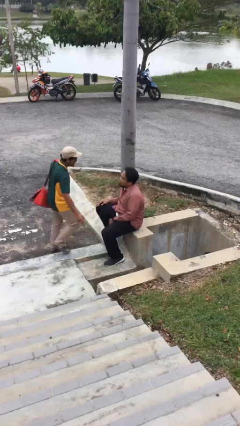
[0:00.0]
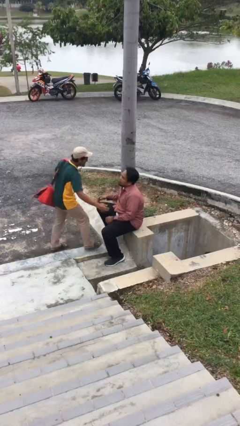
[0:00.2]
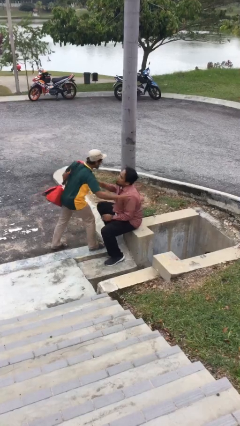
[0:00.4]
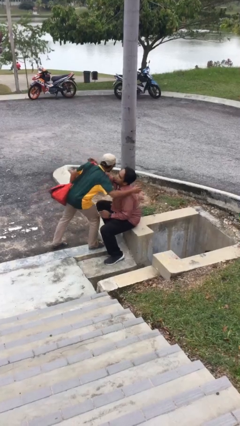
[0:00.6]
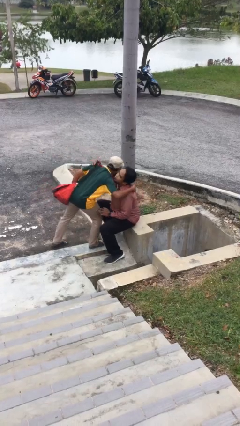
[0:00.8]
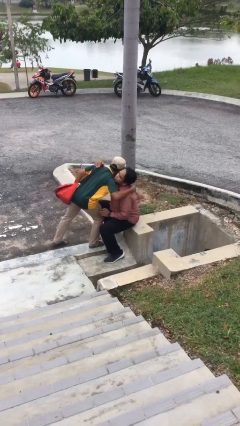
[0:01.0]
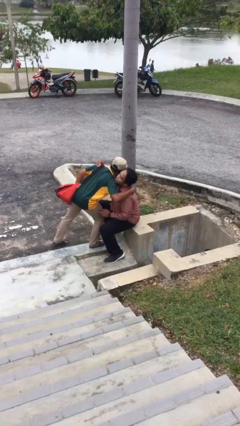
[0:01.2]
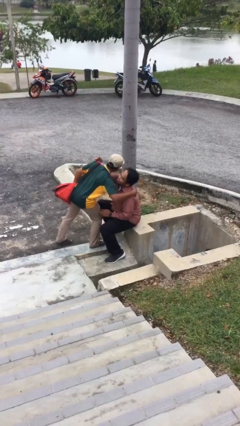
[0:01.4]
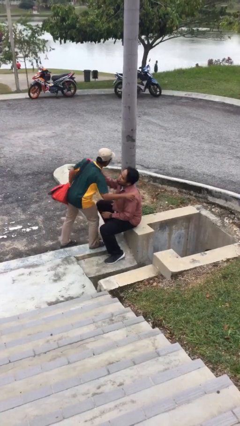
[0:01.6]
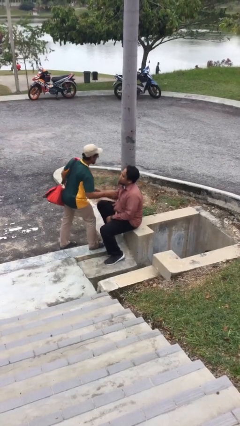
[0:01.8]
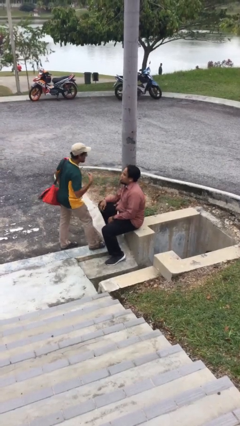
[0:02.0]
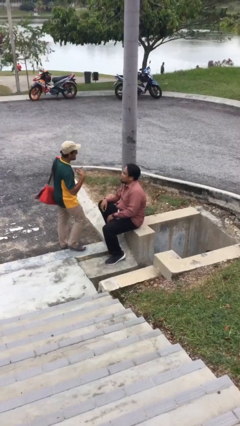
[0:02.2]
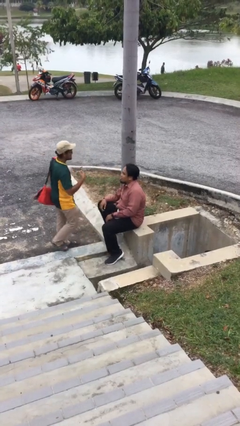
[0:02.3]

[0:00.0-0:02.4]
person embraces person

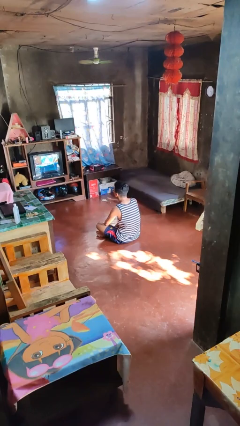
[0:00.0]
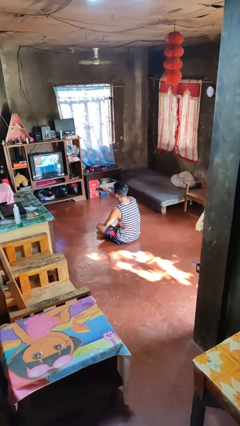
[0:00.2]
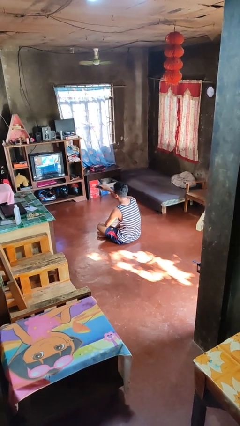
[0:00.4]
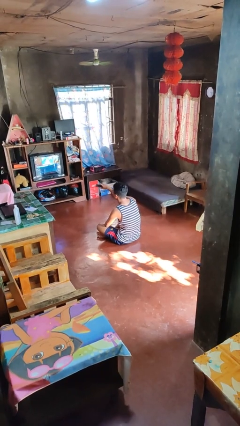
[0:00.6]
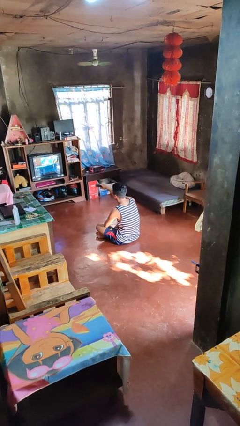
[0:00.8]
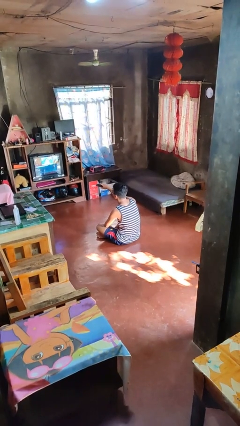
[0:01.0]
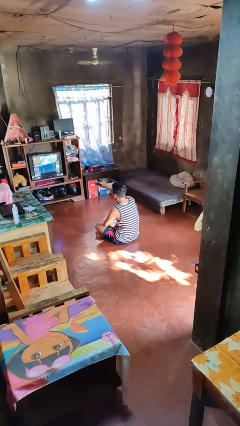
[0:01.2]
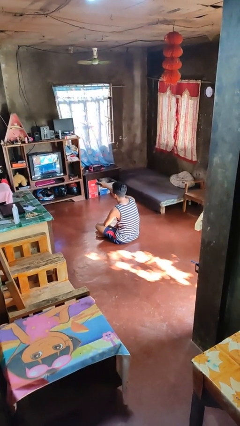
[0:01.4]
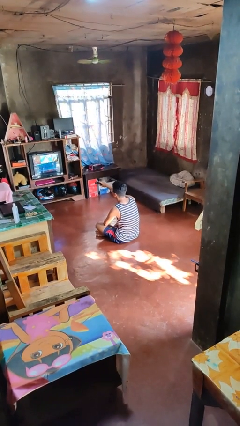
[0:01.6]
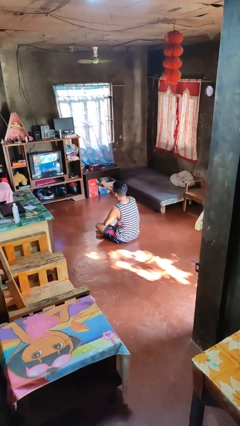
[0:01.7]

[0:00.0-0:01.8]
person uses television remote

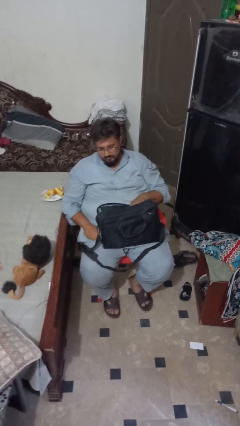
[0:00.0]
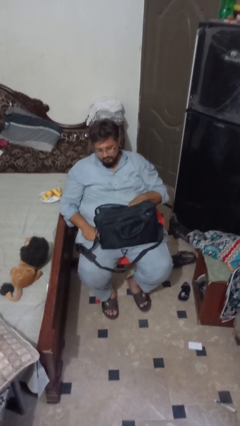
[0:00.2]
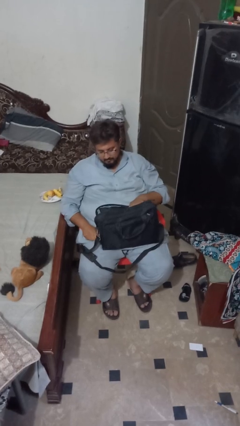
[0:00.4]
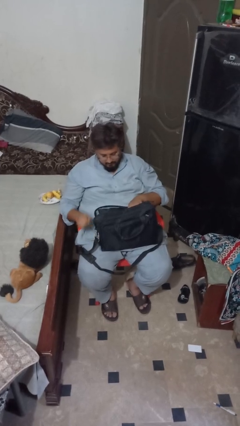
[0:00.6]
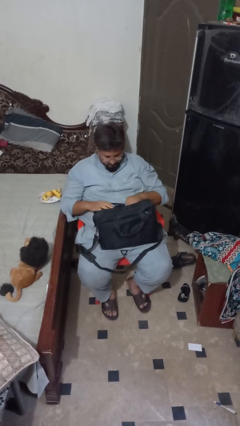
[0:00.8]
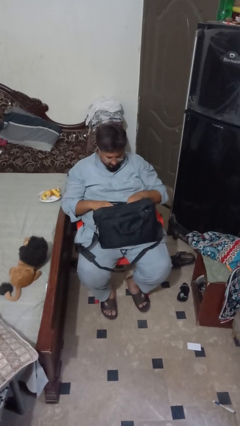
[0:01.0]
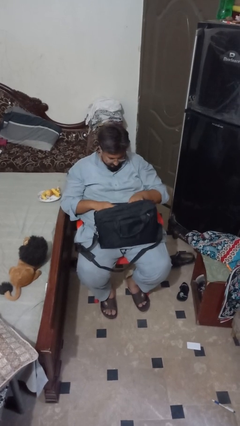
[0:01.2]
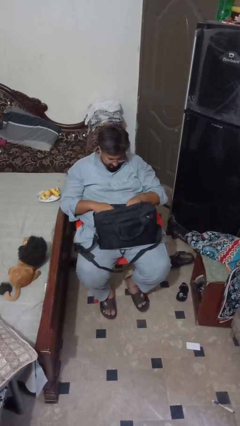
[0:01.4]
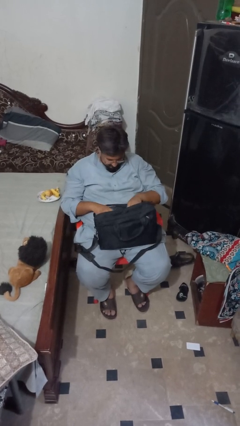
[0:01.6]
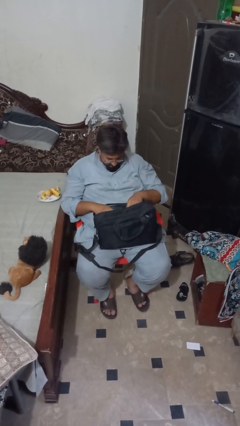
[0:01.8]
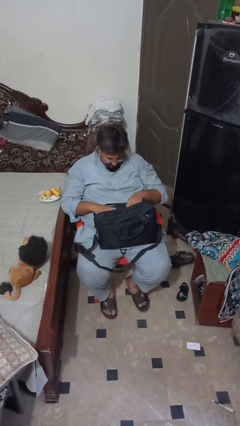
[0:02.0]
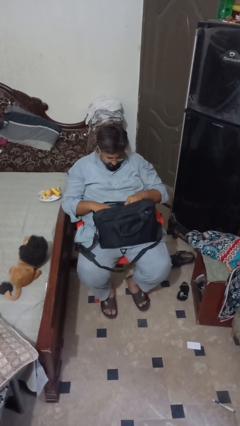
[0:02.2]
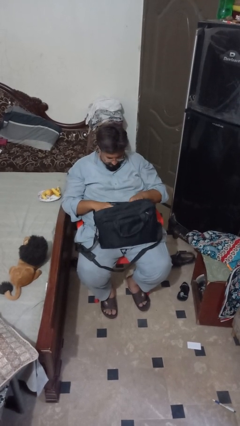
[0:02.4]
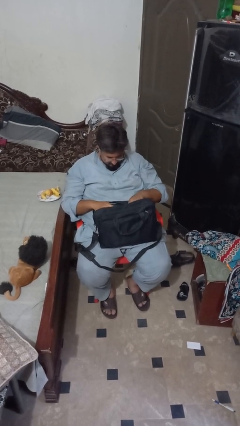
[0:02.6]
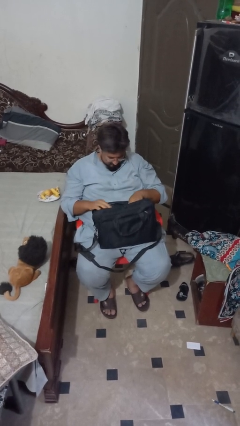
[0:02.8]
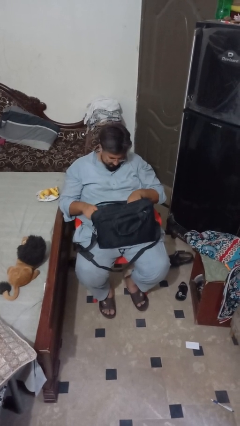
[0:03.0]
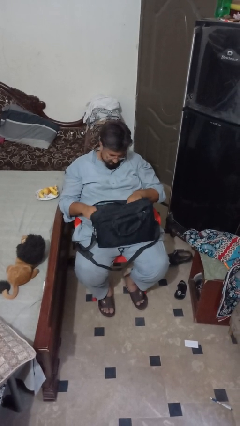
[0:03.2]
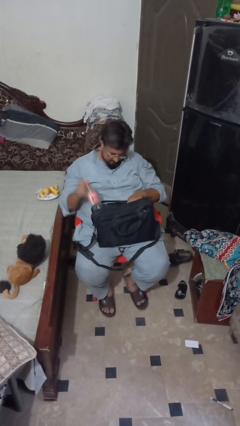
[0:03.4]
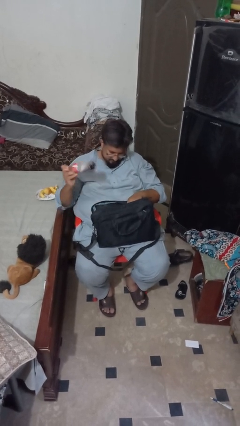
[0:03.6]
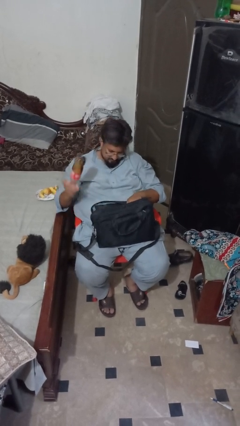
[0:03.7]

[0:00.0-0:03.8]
person takes object from bag

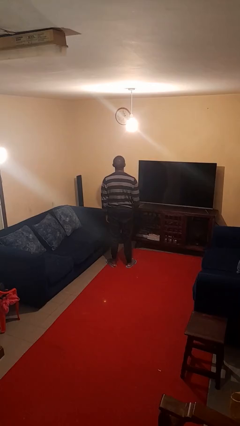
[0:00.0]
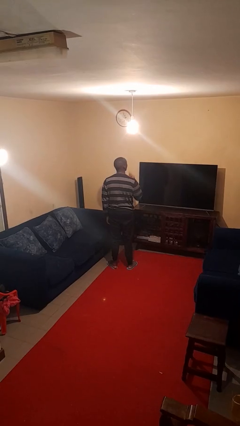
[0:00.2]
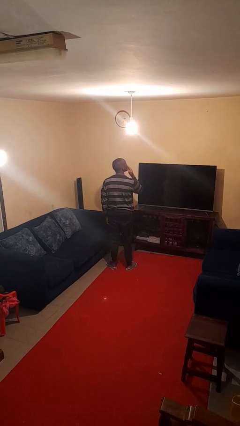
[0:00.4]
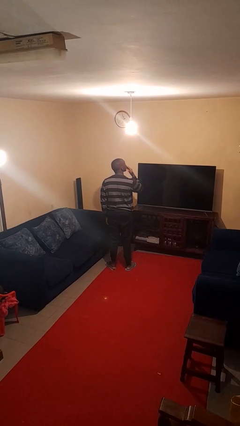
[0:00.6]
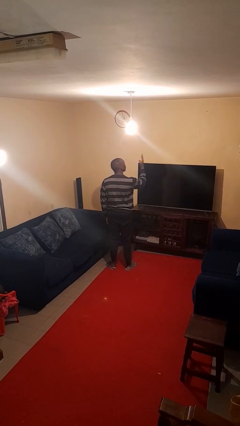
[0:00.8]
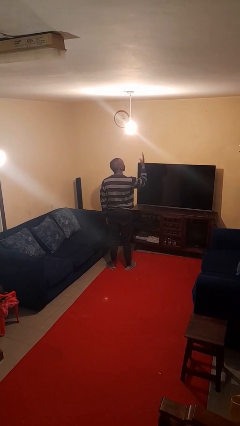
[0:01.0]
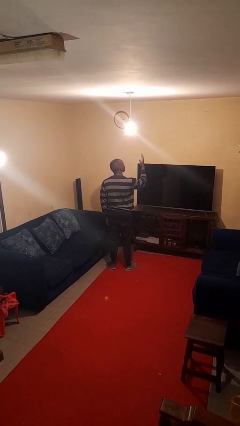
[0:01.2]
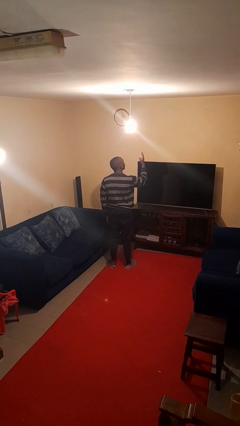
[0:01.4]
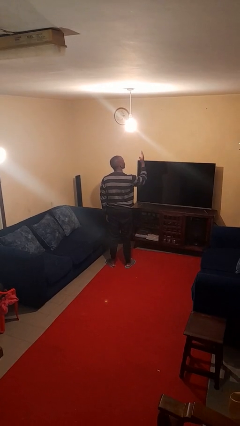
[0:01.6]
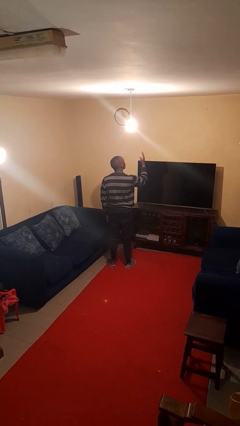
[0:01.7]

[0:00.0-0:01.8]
person gestures blow kiss

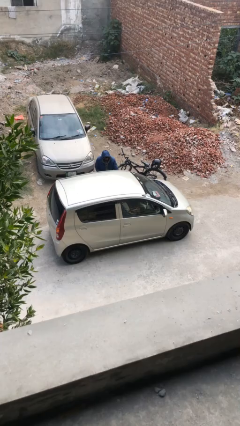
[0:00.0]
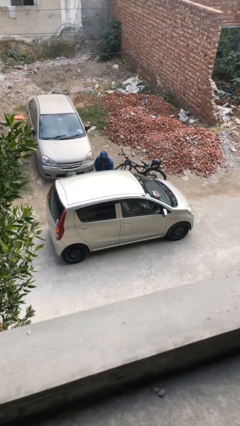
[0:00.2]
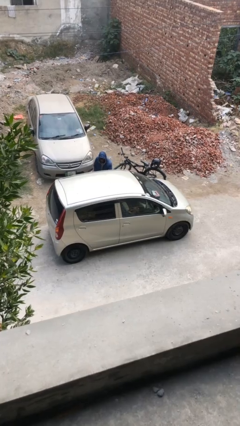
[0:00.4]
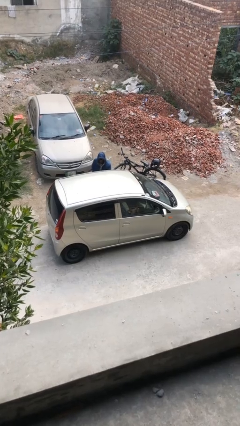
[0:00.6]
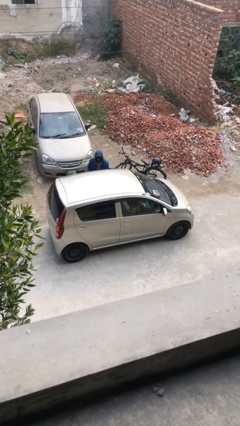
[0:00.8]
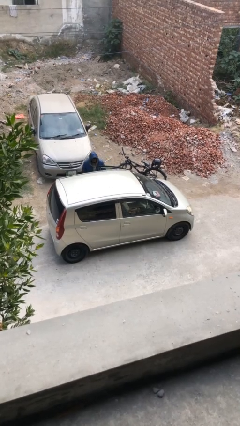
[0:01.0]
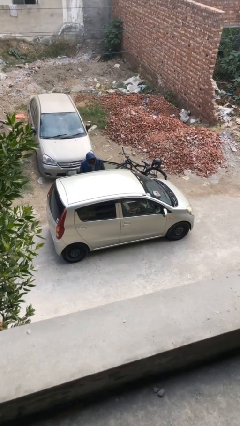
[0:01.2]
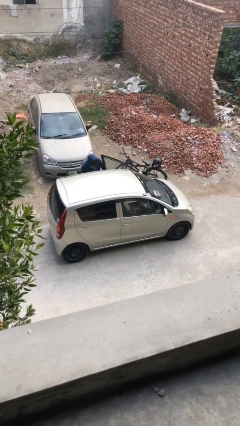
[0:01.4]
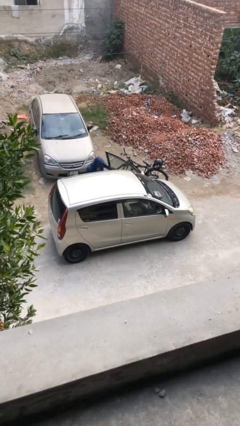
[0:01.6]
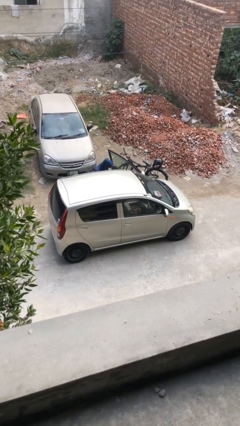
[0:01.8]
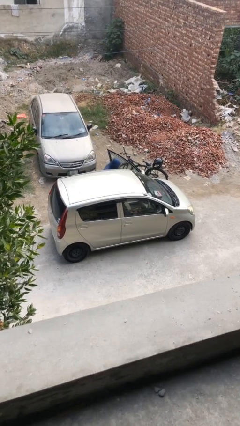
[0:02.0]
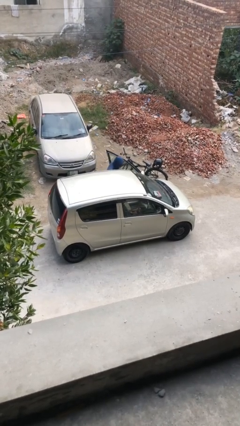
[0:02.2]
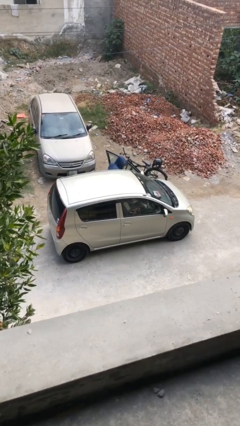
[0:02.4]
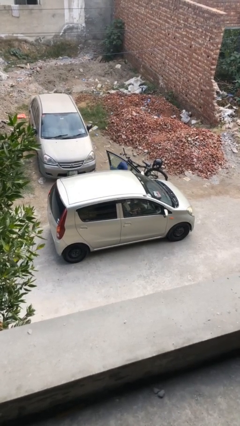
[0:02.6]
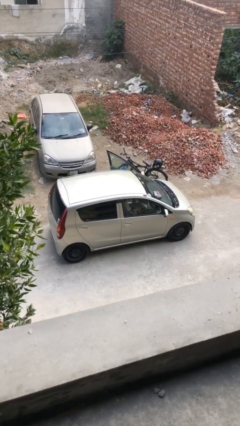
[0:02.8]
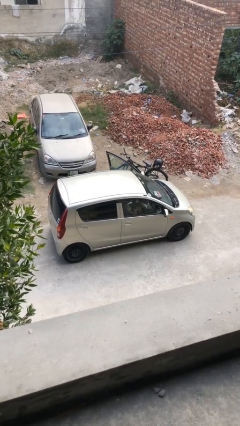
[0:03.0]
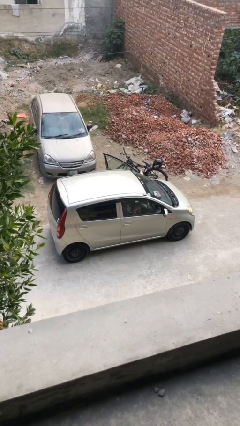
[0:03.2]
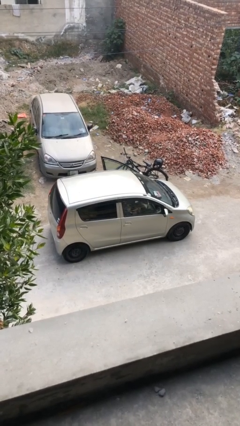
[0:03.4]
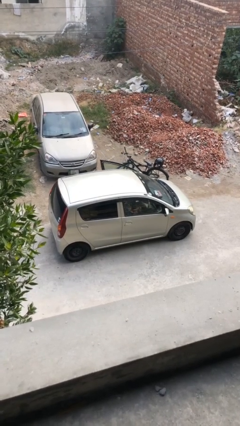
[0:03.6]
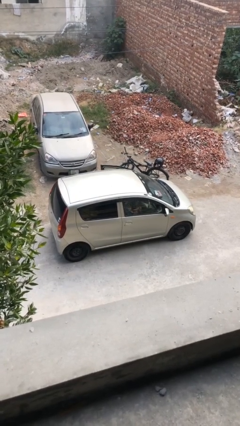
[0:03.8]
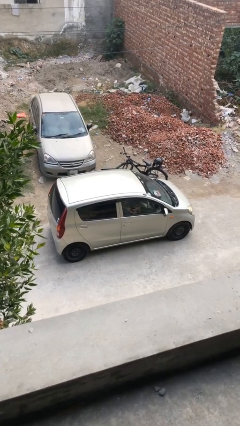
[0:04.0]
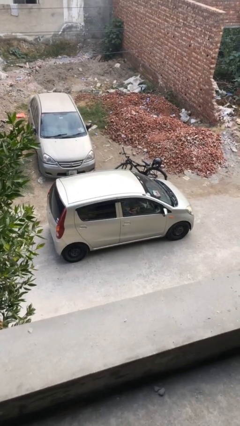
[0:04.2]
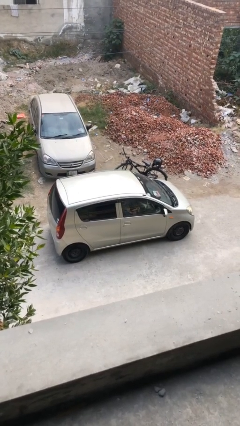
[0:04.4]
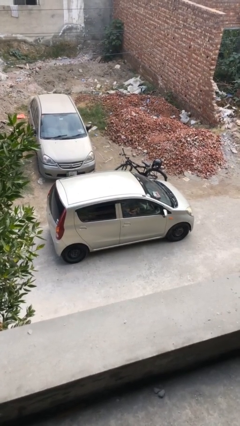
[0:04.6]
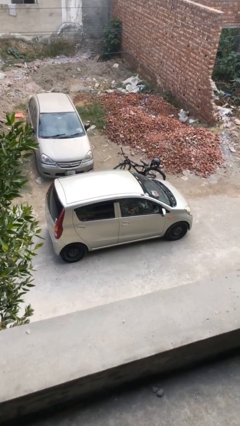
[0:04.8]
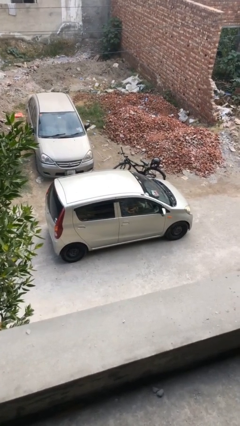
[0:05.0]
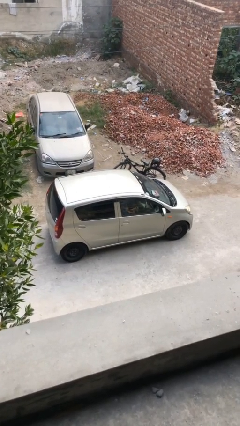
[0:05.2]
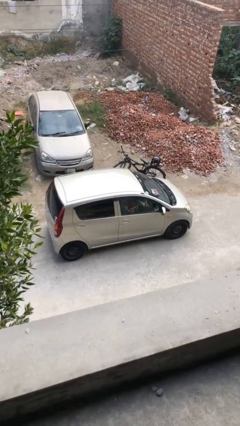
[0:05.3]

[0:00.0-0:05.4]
car picks up person

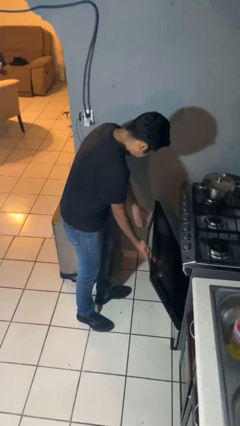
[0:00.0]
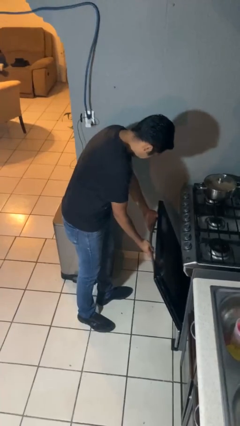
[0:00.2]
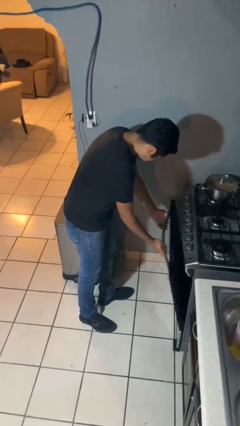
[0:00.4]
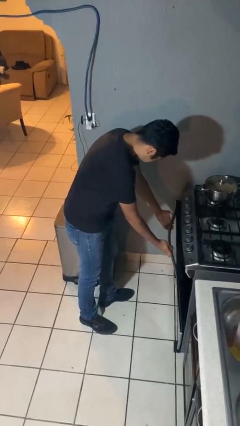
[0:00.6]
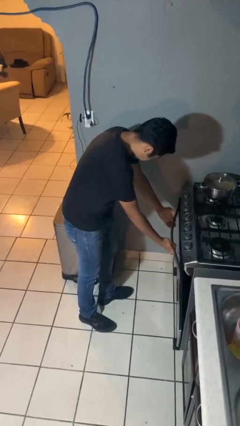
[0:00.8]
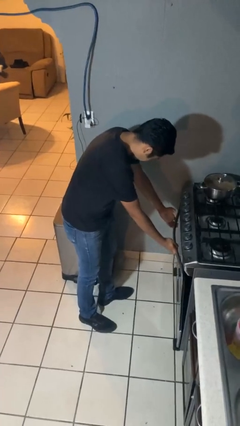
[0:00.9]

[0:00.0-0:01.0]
person closes oven door

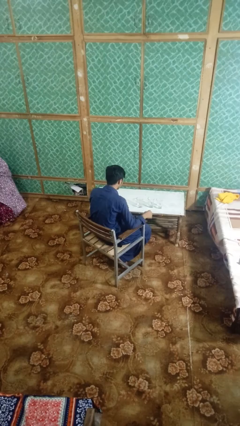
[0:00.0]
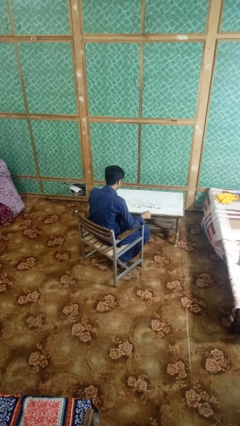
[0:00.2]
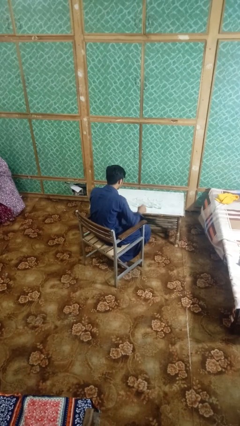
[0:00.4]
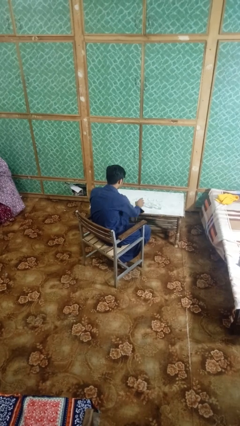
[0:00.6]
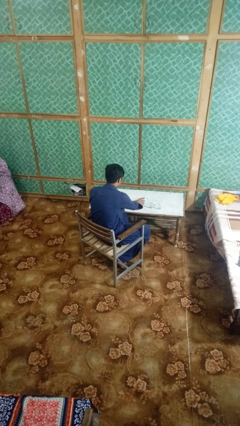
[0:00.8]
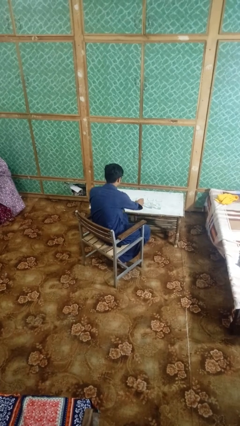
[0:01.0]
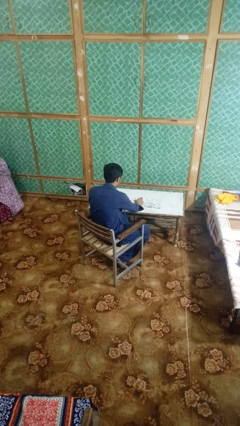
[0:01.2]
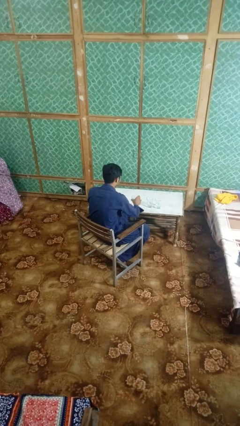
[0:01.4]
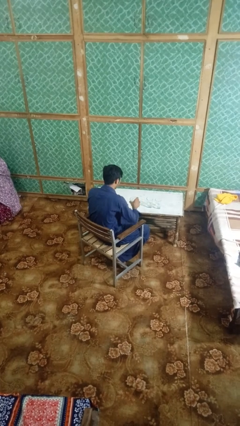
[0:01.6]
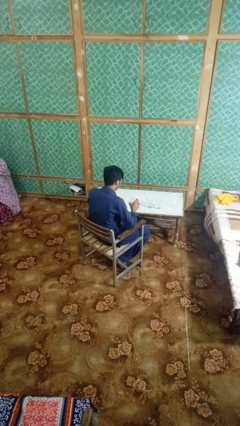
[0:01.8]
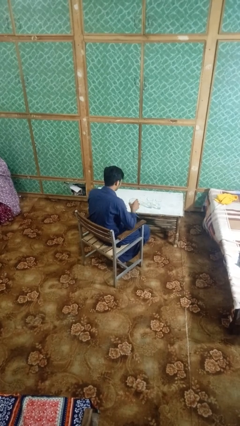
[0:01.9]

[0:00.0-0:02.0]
person picks up object from table
